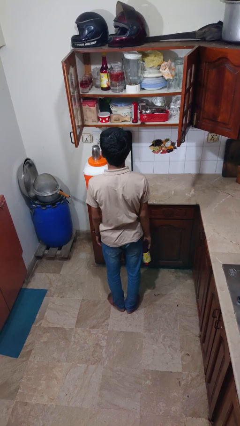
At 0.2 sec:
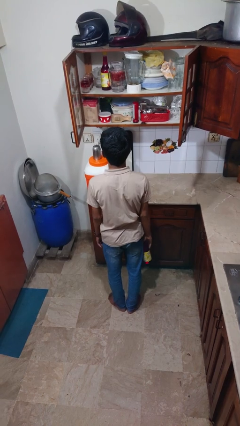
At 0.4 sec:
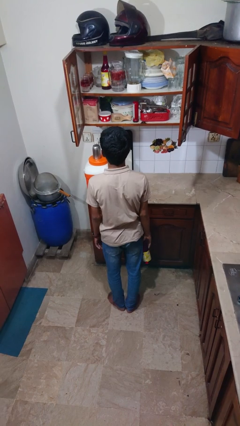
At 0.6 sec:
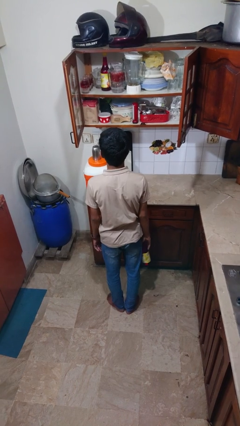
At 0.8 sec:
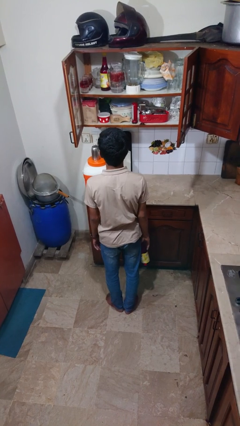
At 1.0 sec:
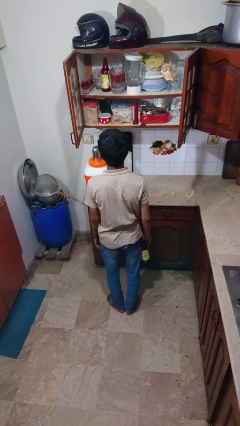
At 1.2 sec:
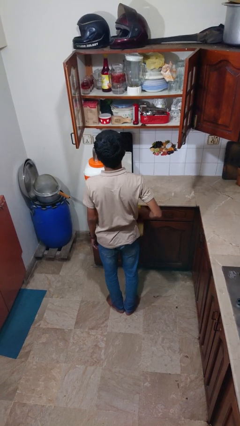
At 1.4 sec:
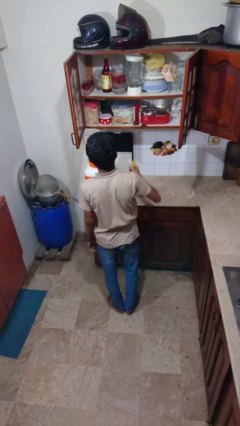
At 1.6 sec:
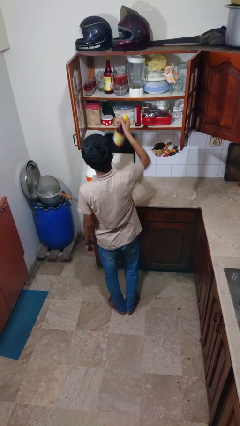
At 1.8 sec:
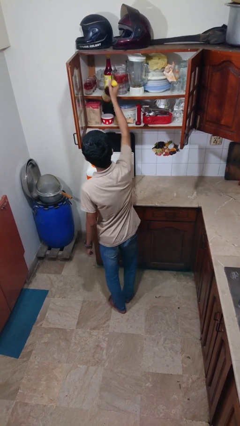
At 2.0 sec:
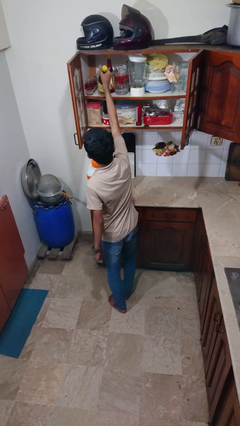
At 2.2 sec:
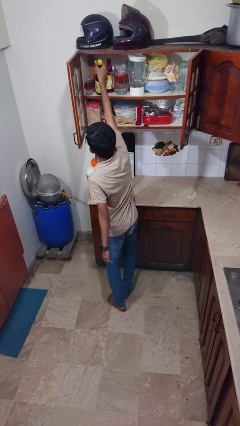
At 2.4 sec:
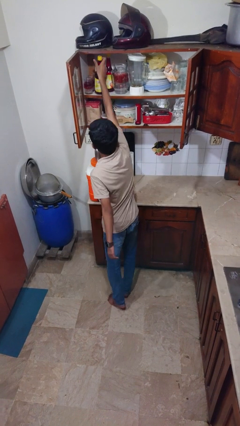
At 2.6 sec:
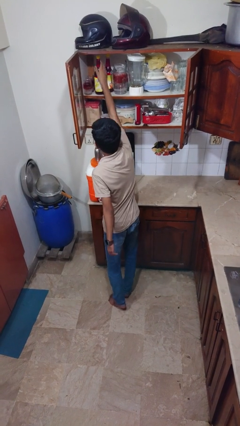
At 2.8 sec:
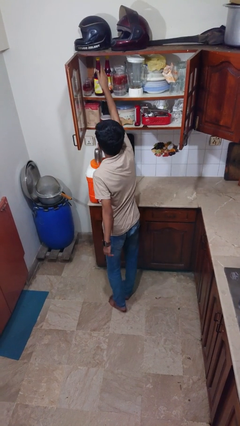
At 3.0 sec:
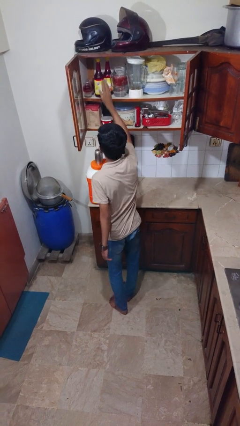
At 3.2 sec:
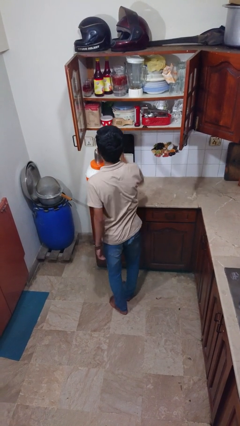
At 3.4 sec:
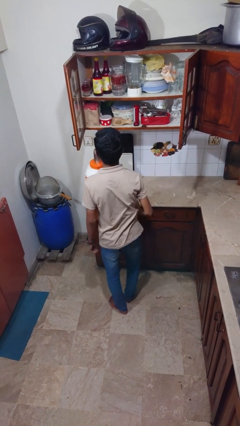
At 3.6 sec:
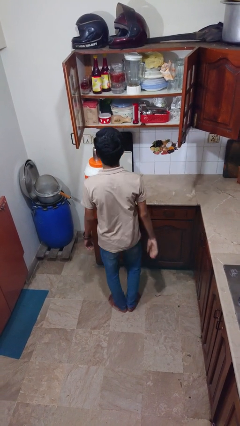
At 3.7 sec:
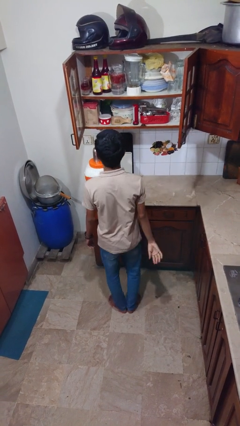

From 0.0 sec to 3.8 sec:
person puts down object into cabinet

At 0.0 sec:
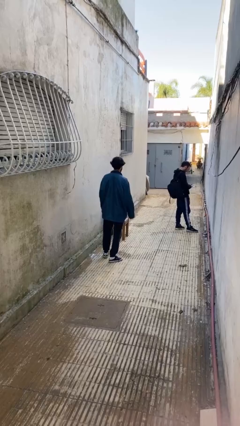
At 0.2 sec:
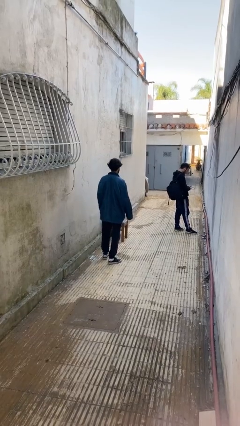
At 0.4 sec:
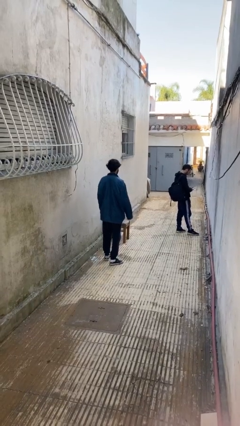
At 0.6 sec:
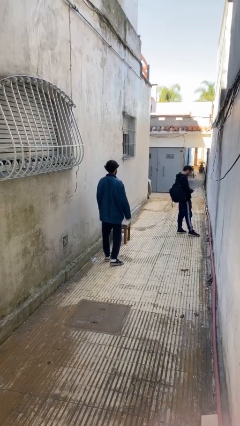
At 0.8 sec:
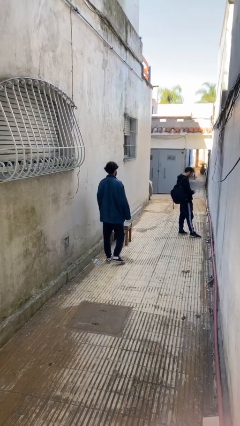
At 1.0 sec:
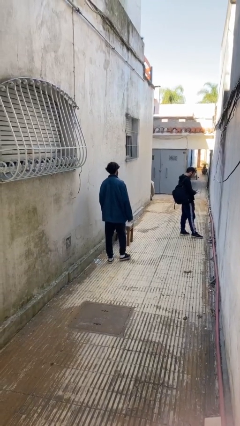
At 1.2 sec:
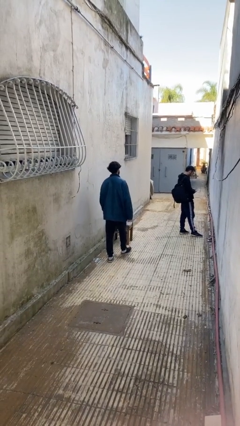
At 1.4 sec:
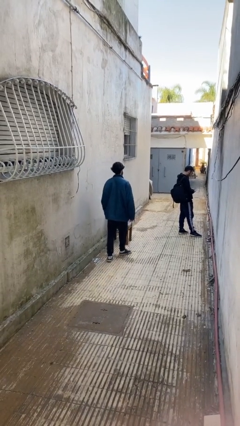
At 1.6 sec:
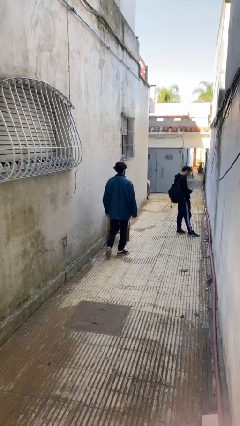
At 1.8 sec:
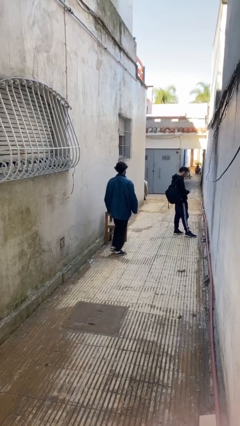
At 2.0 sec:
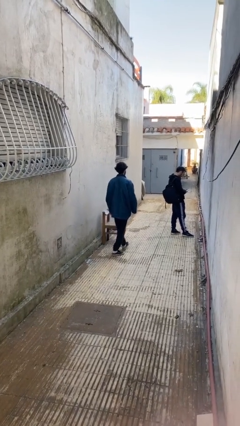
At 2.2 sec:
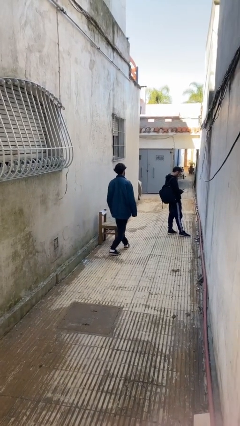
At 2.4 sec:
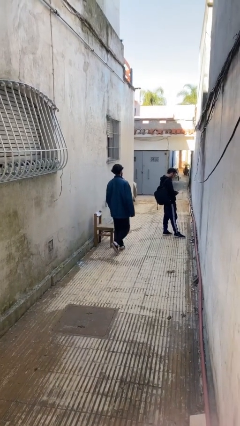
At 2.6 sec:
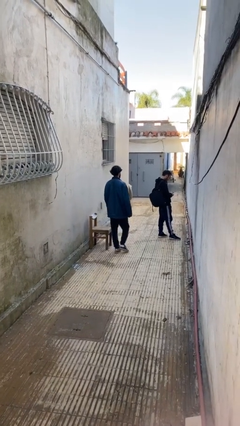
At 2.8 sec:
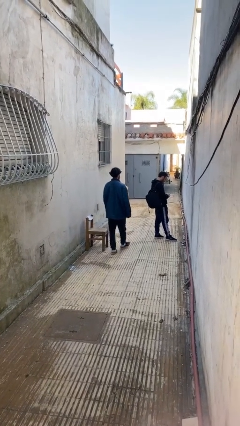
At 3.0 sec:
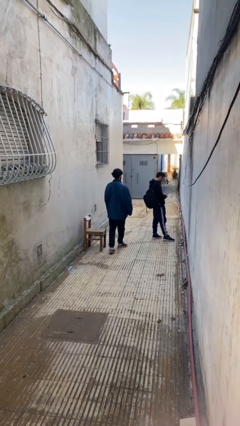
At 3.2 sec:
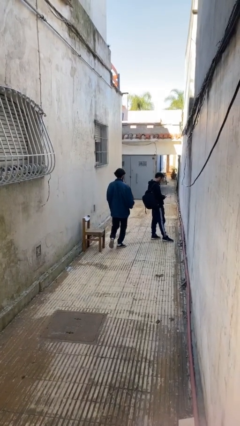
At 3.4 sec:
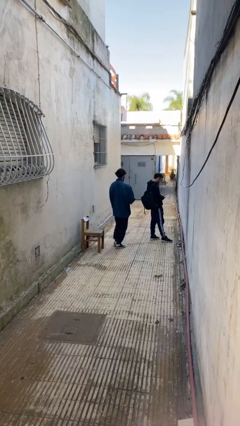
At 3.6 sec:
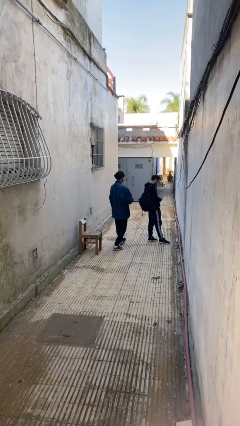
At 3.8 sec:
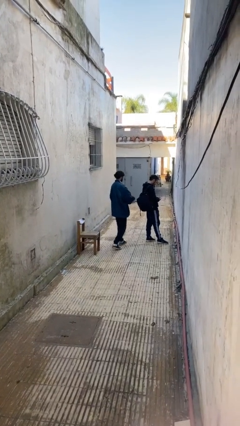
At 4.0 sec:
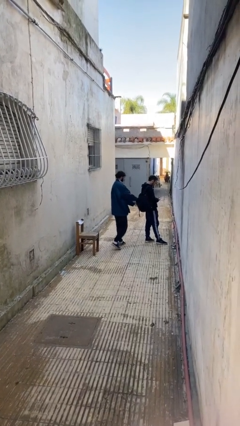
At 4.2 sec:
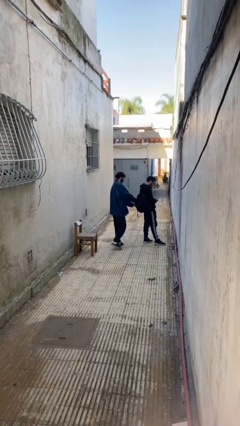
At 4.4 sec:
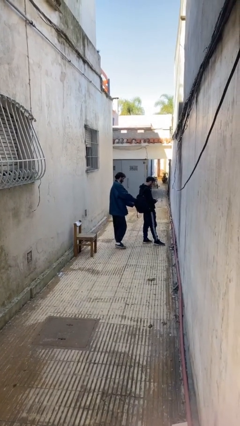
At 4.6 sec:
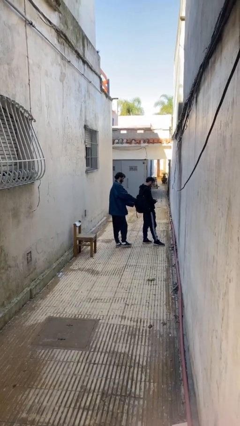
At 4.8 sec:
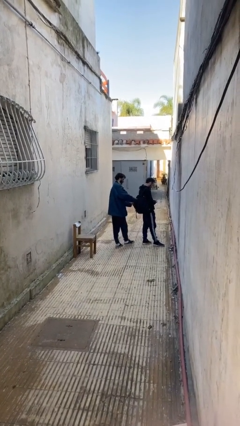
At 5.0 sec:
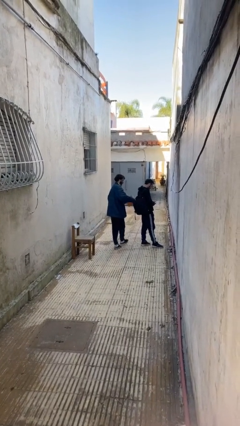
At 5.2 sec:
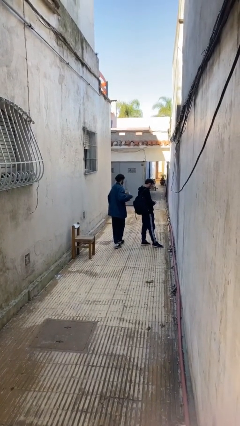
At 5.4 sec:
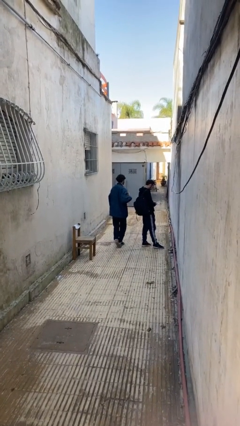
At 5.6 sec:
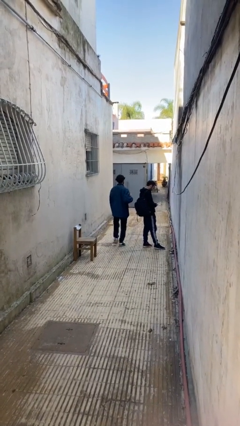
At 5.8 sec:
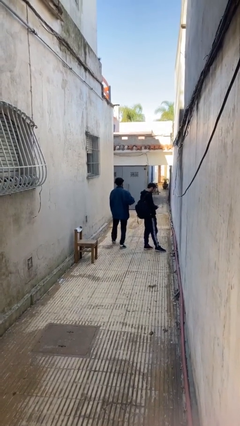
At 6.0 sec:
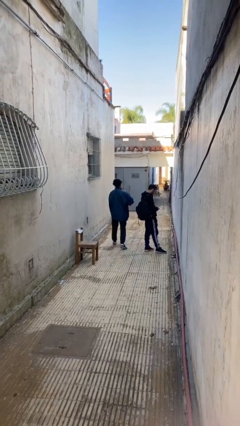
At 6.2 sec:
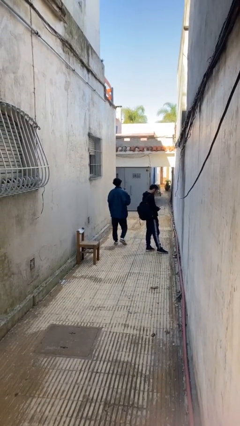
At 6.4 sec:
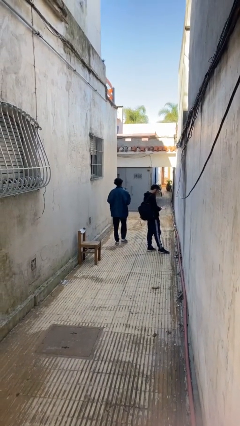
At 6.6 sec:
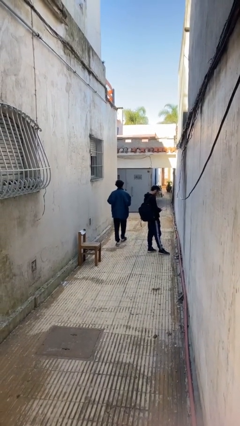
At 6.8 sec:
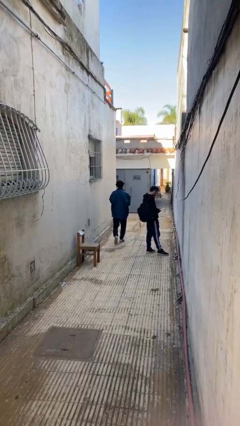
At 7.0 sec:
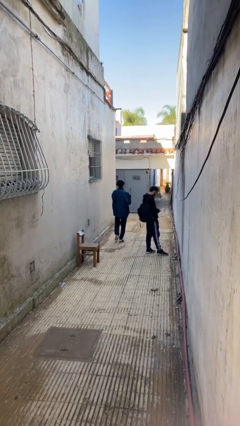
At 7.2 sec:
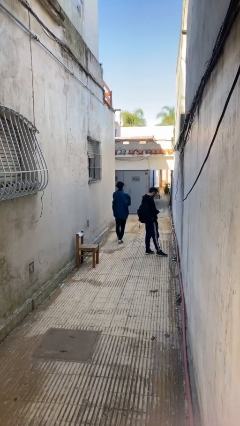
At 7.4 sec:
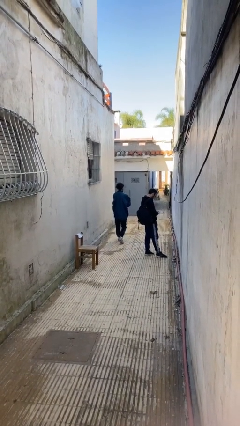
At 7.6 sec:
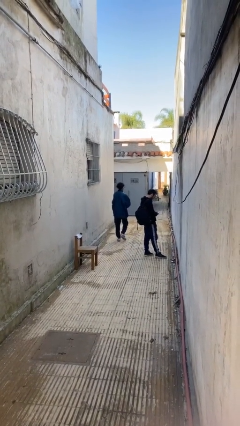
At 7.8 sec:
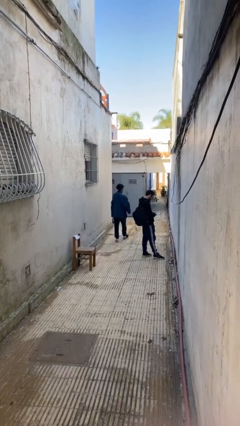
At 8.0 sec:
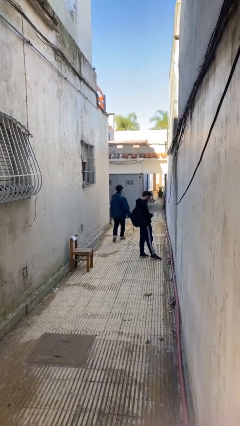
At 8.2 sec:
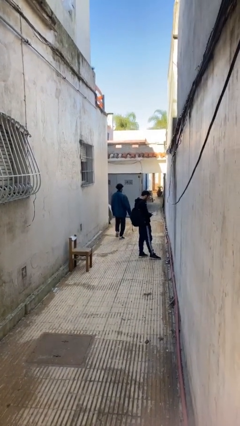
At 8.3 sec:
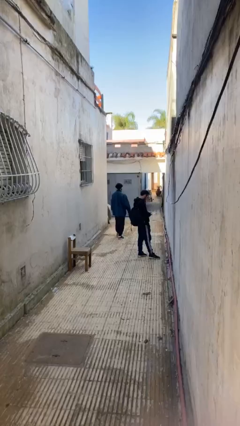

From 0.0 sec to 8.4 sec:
person steals object from person

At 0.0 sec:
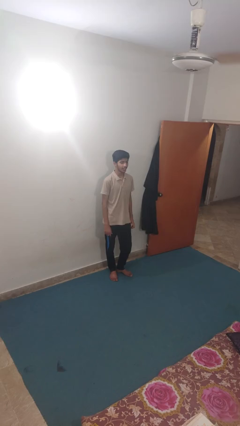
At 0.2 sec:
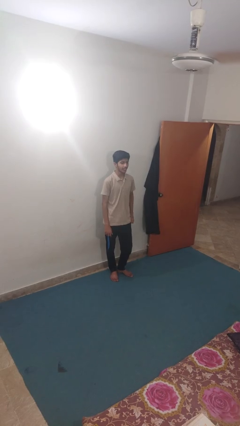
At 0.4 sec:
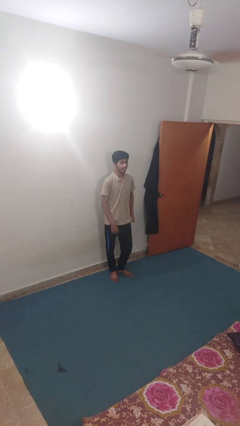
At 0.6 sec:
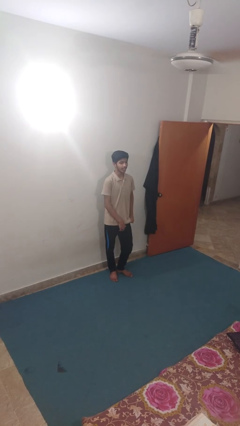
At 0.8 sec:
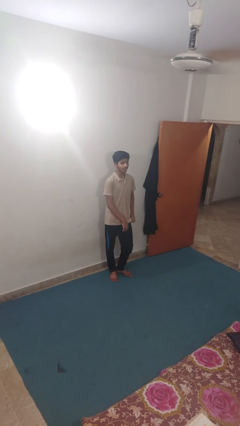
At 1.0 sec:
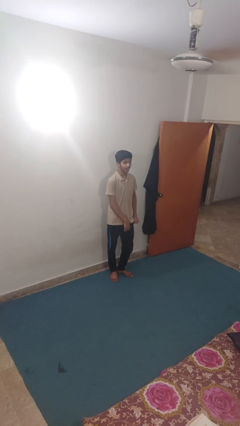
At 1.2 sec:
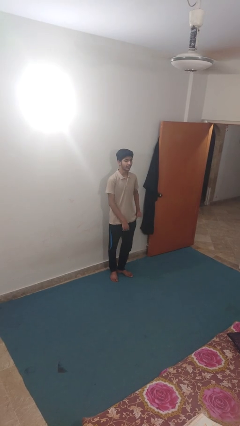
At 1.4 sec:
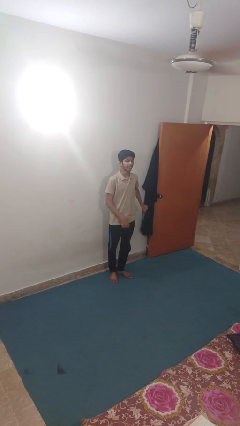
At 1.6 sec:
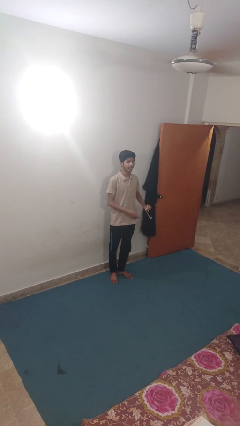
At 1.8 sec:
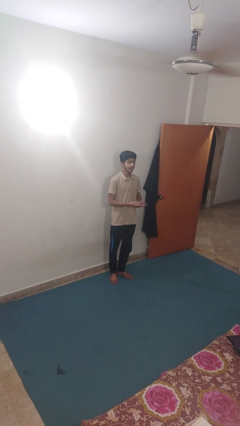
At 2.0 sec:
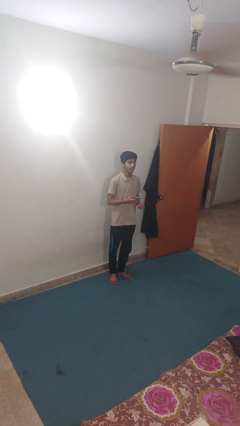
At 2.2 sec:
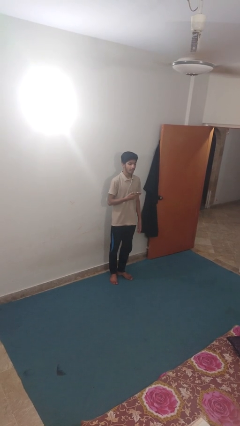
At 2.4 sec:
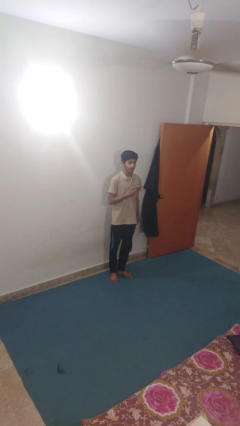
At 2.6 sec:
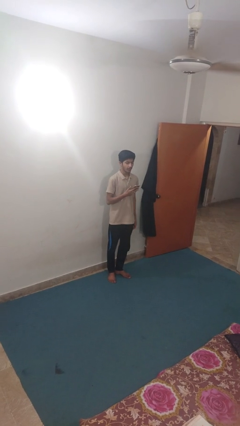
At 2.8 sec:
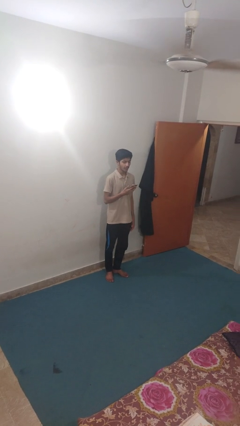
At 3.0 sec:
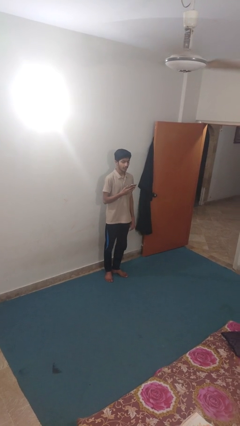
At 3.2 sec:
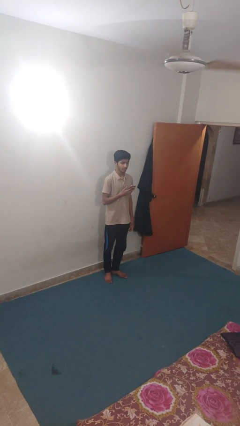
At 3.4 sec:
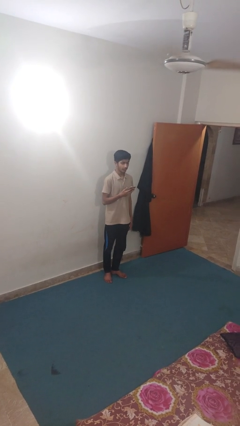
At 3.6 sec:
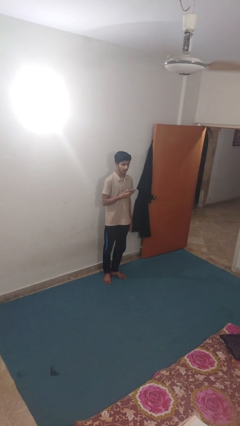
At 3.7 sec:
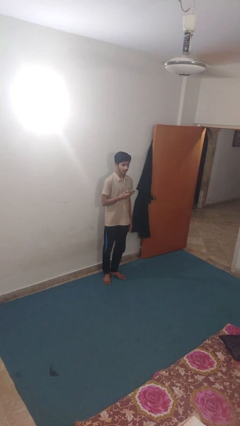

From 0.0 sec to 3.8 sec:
person takes phone from pocket

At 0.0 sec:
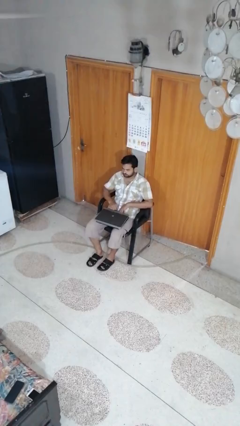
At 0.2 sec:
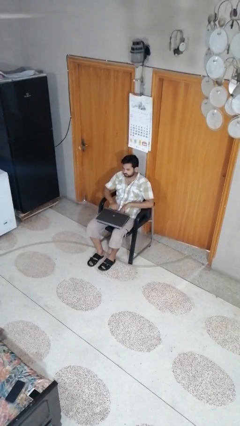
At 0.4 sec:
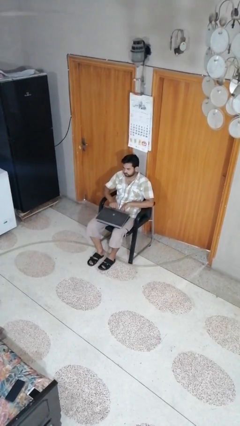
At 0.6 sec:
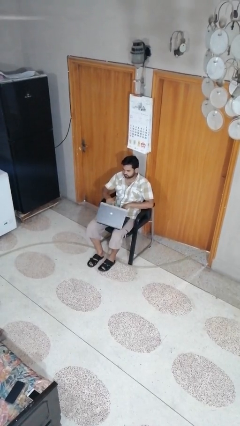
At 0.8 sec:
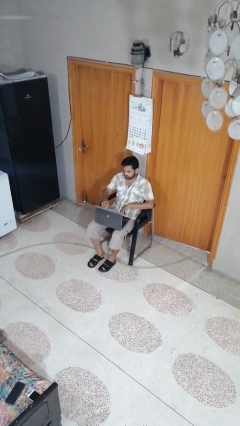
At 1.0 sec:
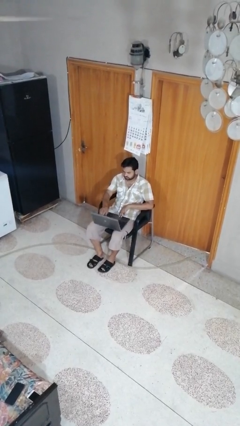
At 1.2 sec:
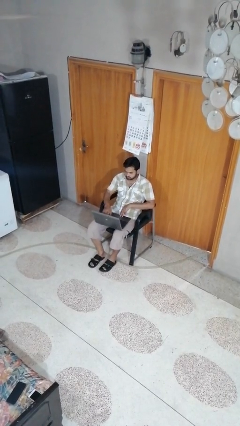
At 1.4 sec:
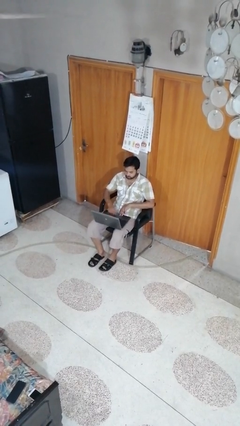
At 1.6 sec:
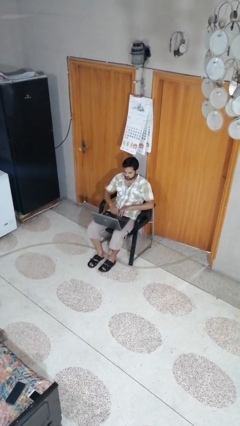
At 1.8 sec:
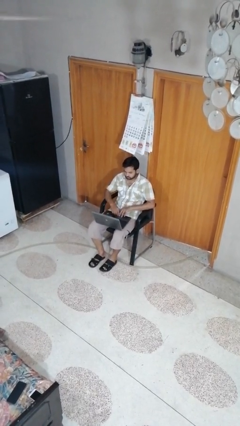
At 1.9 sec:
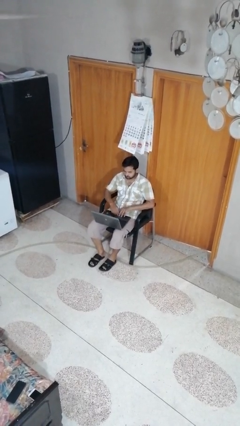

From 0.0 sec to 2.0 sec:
person opens laptop
